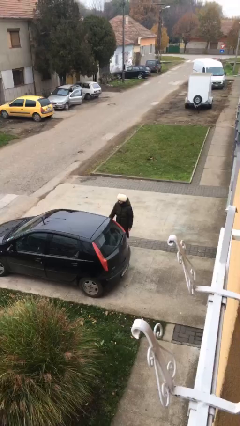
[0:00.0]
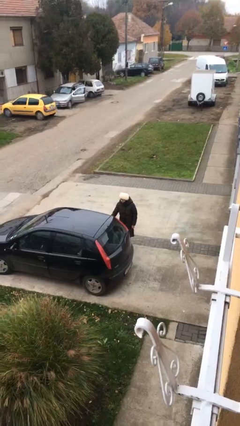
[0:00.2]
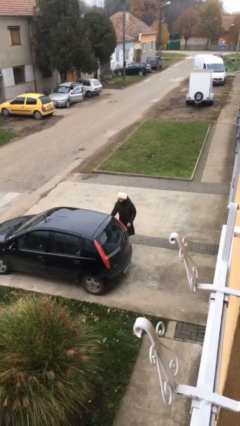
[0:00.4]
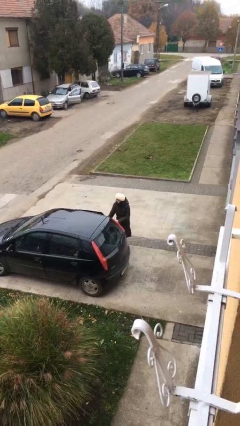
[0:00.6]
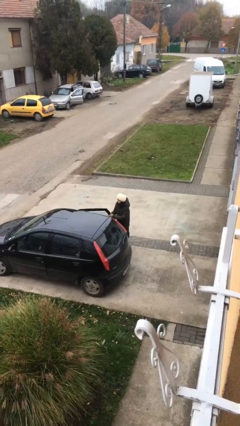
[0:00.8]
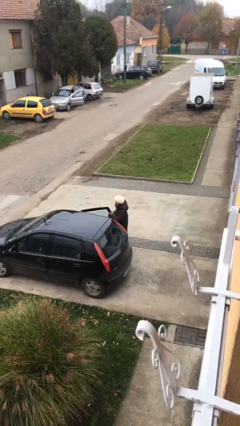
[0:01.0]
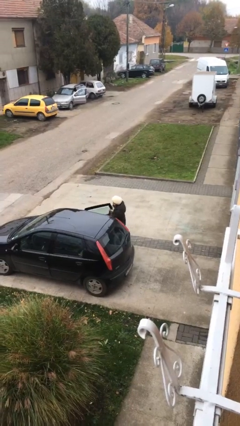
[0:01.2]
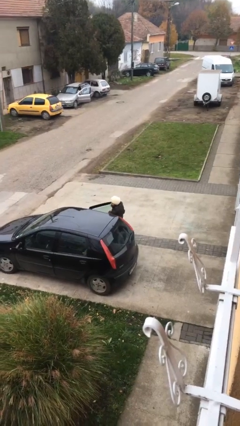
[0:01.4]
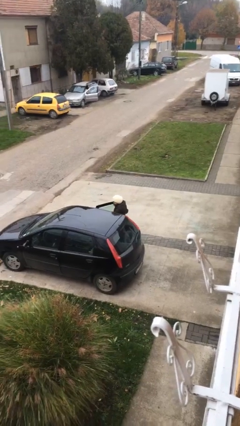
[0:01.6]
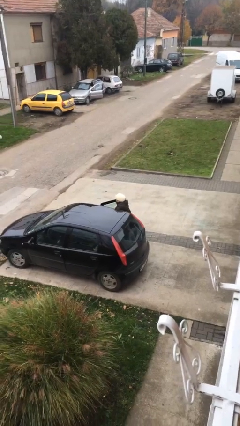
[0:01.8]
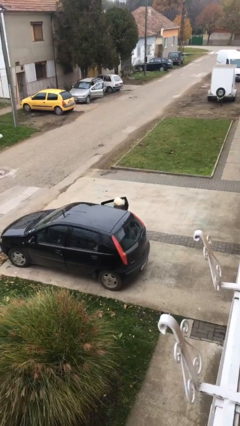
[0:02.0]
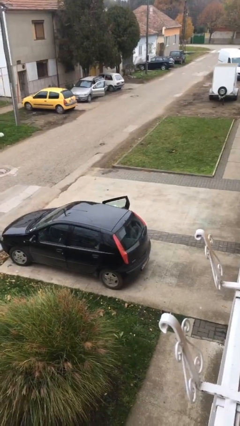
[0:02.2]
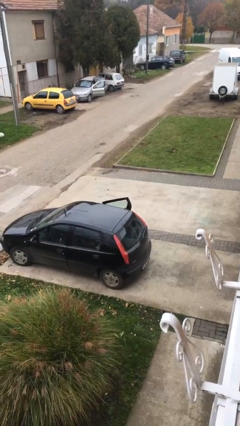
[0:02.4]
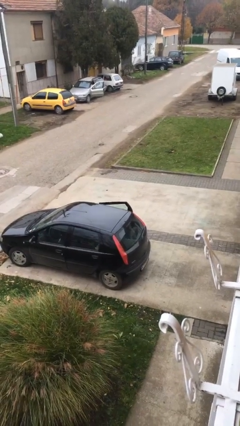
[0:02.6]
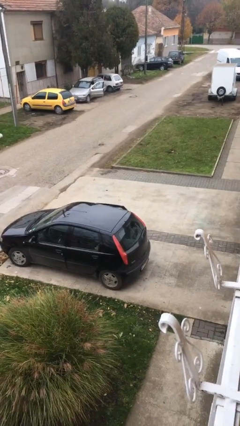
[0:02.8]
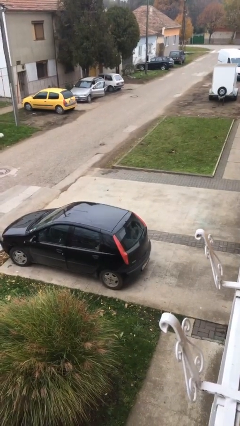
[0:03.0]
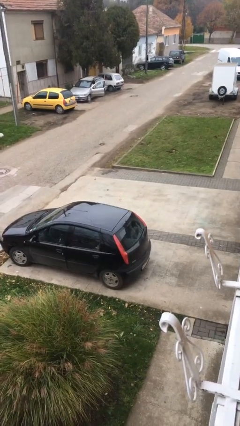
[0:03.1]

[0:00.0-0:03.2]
person enters car

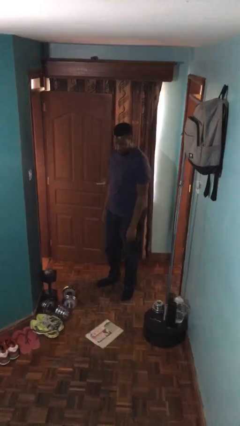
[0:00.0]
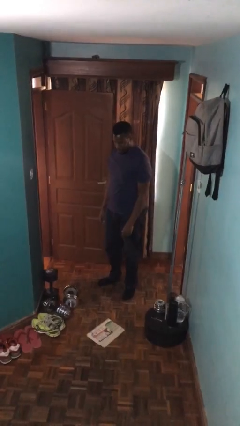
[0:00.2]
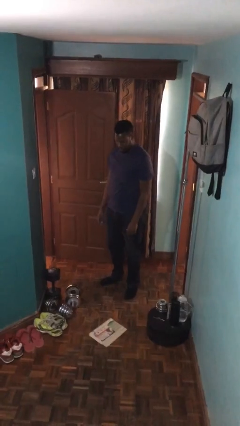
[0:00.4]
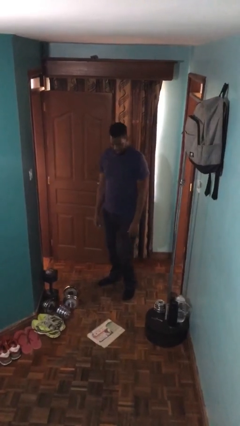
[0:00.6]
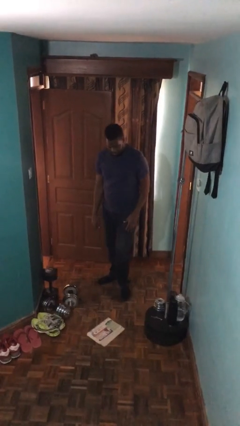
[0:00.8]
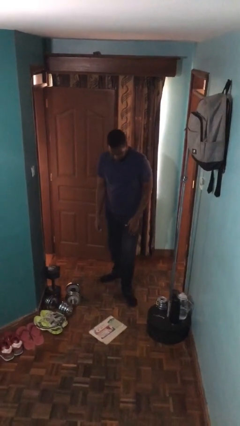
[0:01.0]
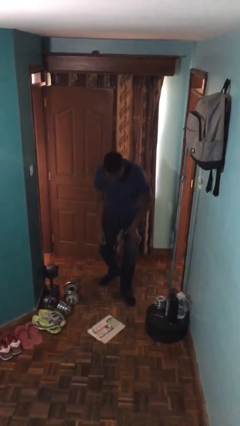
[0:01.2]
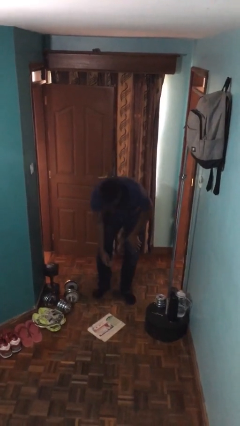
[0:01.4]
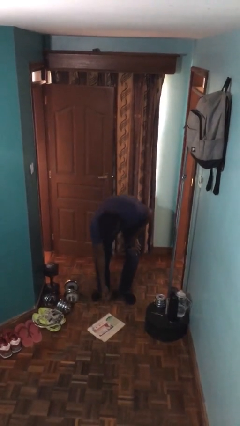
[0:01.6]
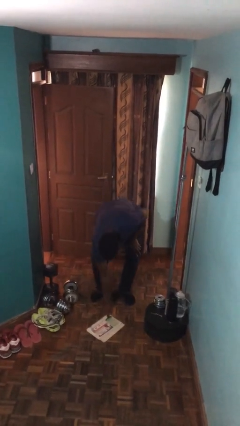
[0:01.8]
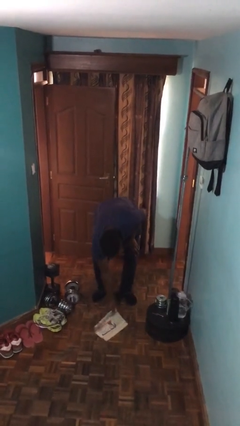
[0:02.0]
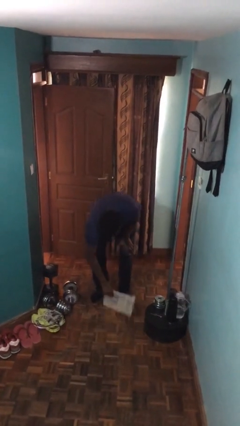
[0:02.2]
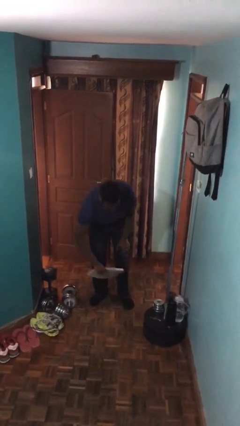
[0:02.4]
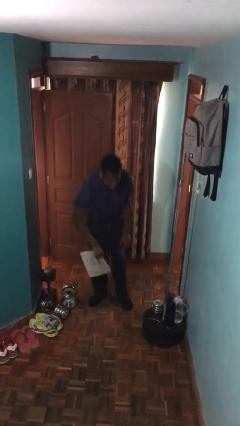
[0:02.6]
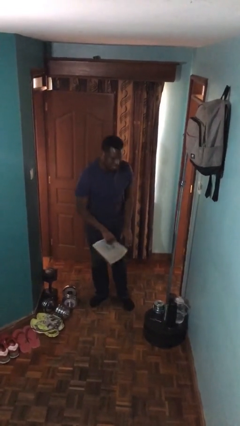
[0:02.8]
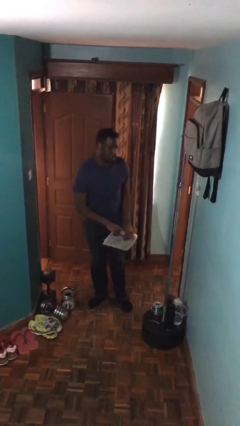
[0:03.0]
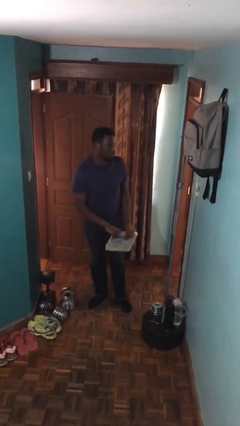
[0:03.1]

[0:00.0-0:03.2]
person picks up object from floor

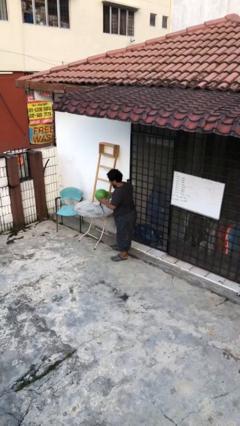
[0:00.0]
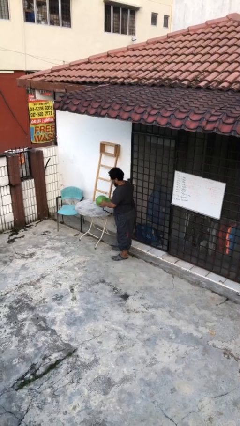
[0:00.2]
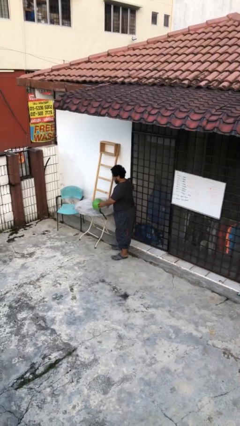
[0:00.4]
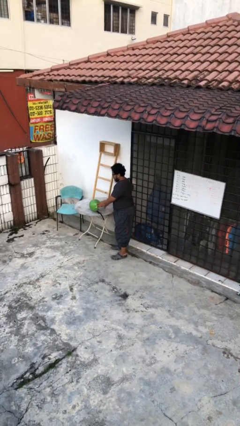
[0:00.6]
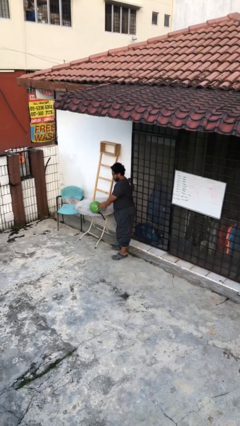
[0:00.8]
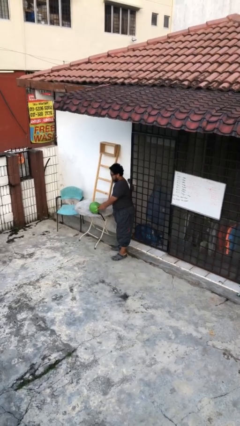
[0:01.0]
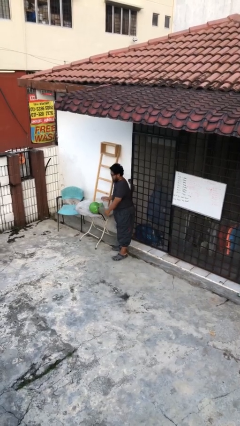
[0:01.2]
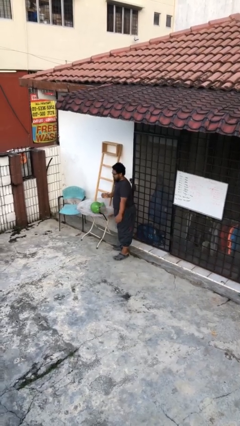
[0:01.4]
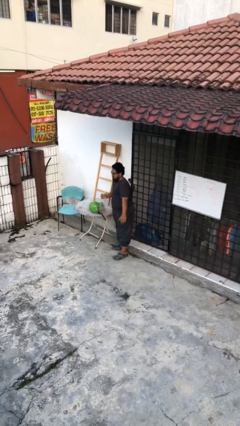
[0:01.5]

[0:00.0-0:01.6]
person puts down object on table

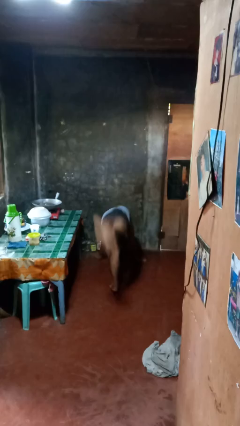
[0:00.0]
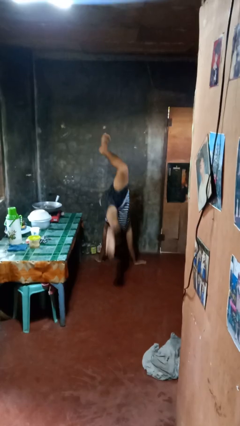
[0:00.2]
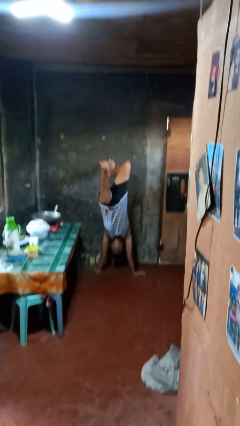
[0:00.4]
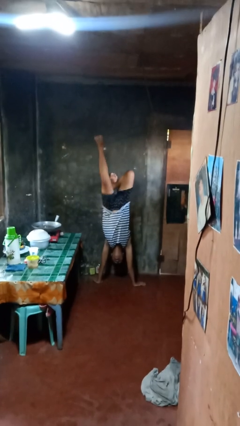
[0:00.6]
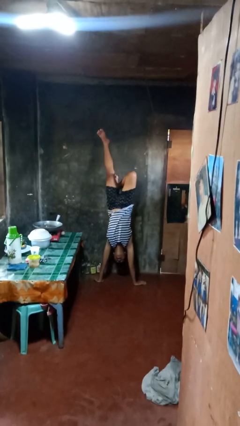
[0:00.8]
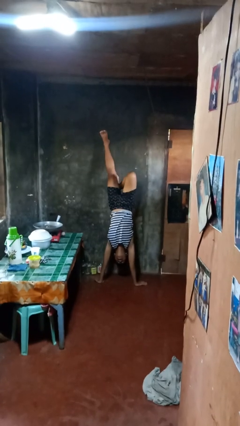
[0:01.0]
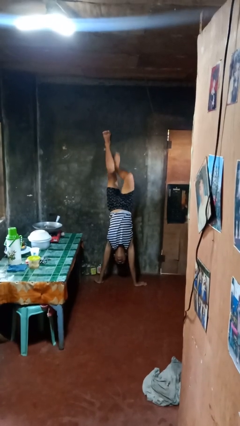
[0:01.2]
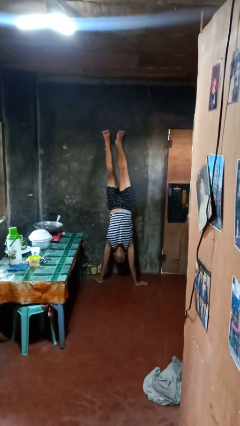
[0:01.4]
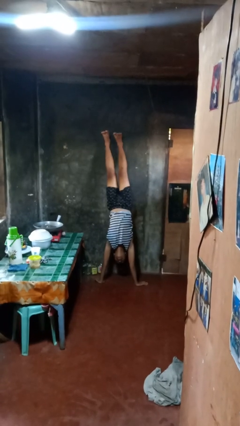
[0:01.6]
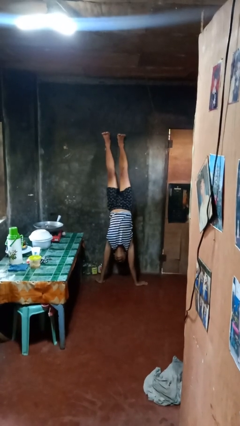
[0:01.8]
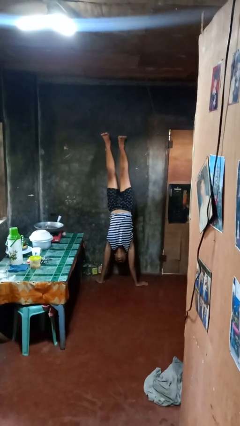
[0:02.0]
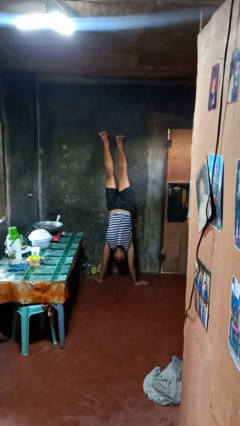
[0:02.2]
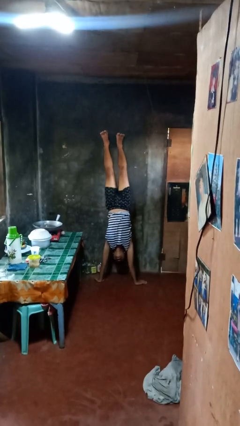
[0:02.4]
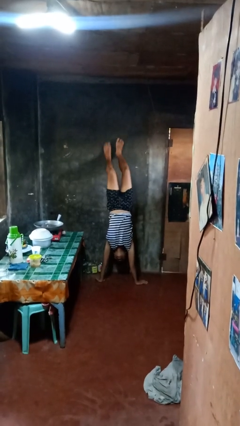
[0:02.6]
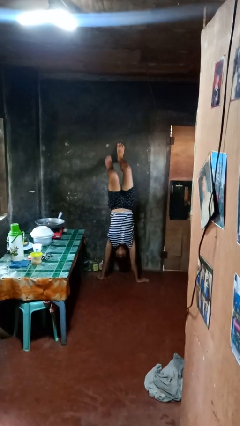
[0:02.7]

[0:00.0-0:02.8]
person handstand

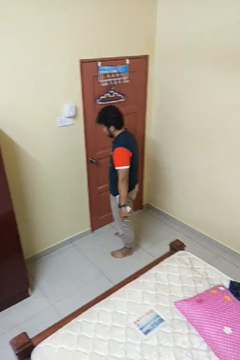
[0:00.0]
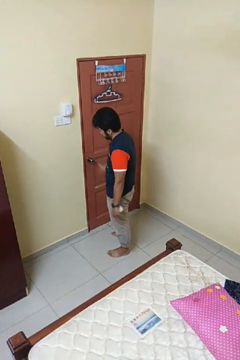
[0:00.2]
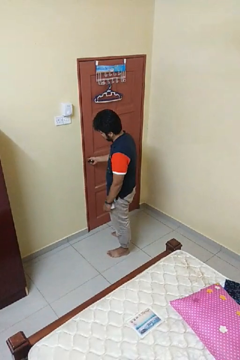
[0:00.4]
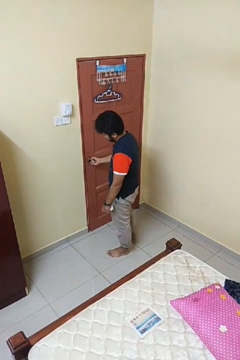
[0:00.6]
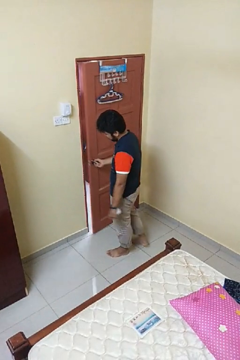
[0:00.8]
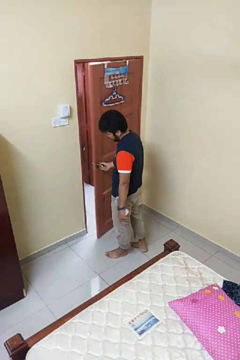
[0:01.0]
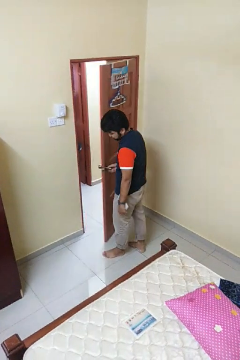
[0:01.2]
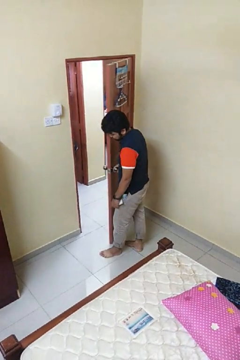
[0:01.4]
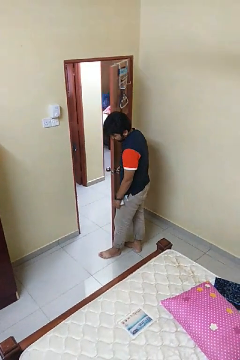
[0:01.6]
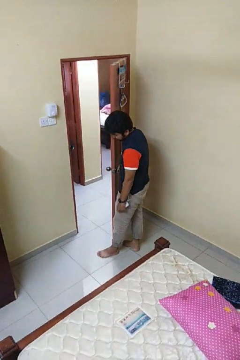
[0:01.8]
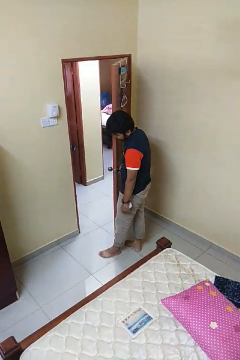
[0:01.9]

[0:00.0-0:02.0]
person opens facility door

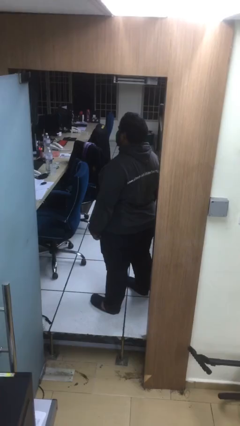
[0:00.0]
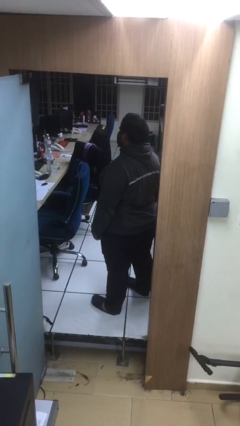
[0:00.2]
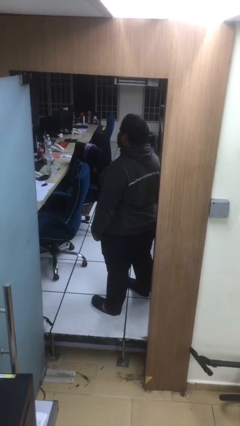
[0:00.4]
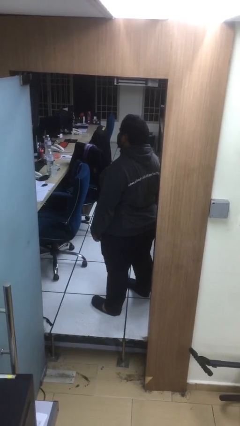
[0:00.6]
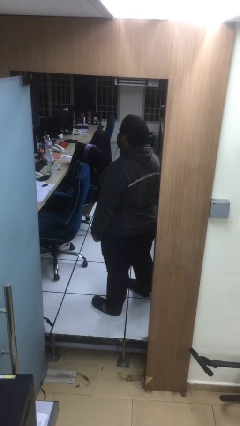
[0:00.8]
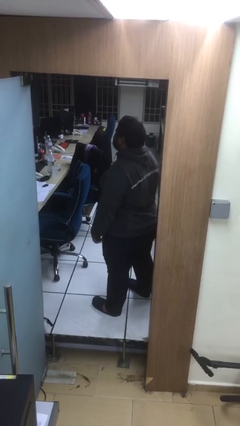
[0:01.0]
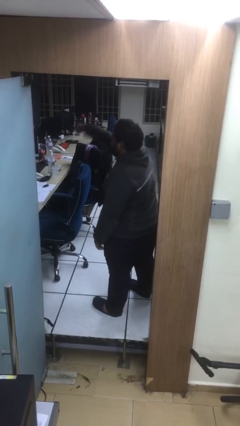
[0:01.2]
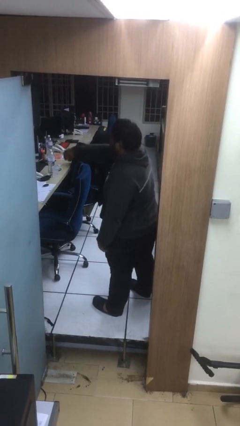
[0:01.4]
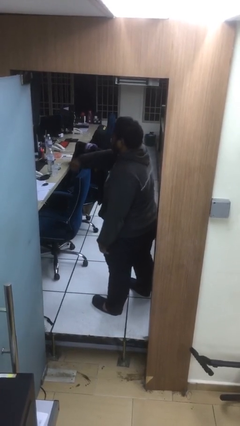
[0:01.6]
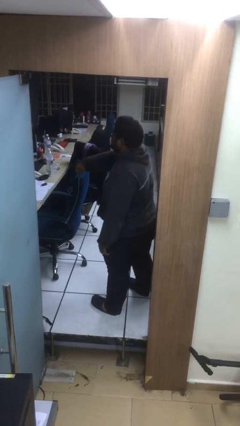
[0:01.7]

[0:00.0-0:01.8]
person punches

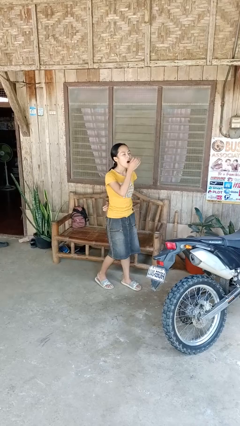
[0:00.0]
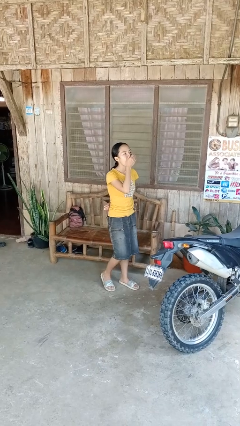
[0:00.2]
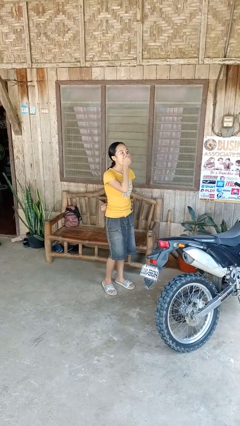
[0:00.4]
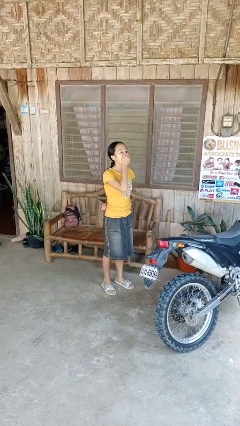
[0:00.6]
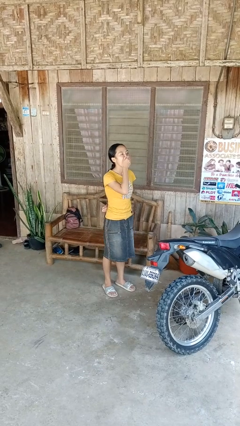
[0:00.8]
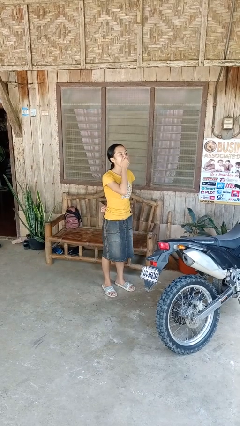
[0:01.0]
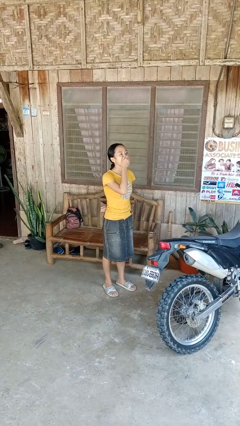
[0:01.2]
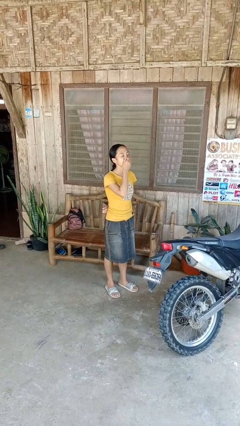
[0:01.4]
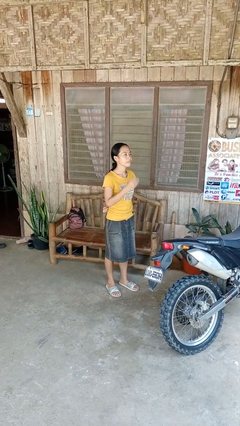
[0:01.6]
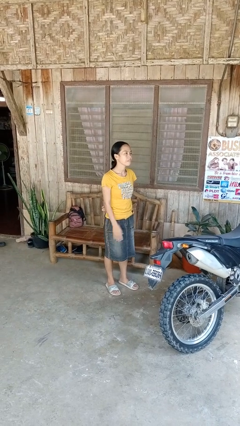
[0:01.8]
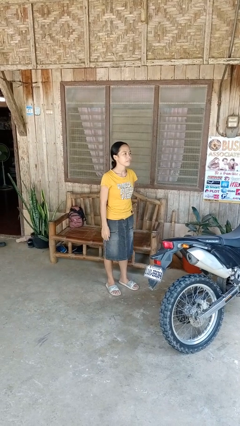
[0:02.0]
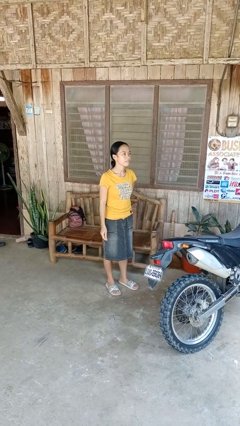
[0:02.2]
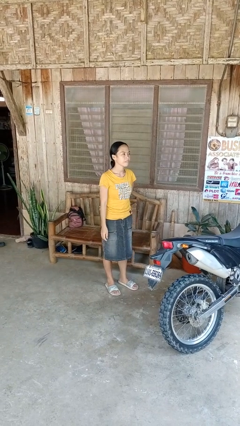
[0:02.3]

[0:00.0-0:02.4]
person yawns

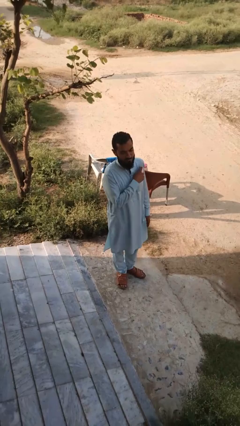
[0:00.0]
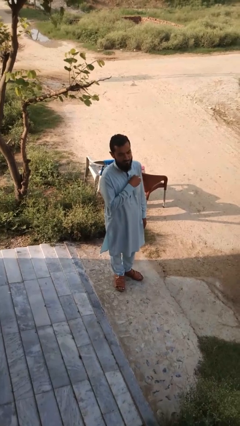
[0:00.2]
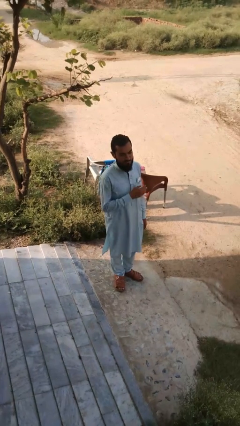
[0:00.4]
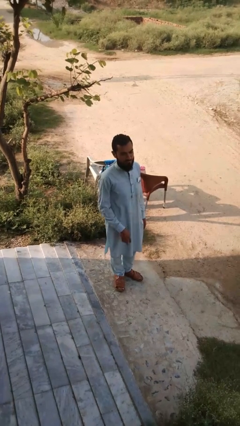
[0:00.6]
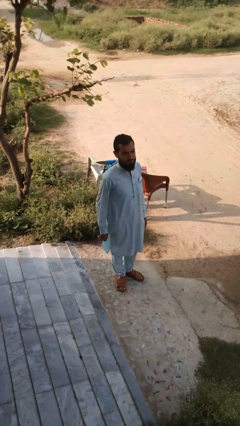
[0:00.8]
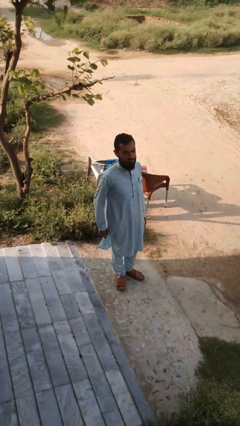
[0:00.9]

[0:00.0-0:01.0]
person takes phone from pocket
